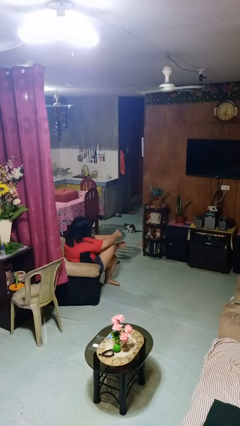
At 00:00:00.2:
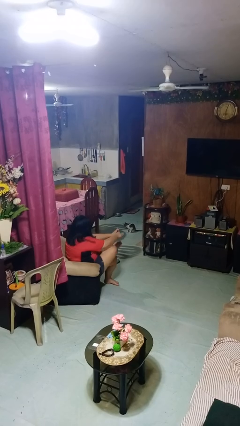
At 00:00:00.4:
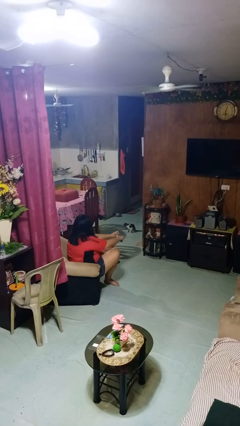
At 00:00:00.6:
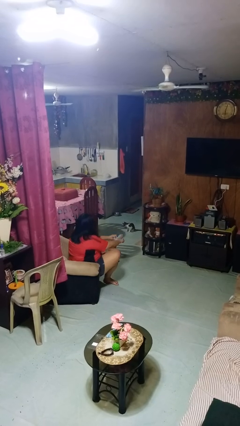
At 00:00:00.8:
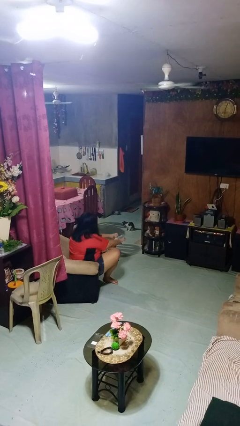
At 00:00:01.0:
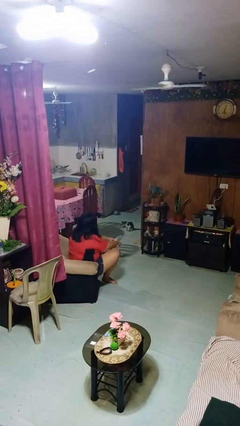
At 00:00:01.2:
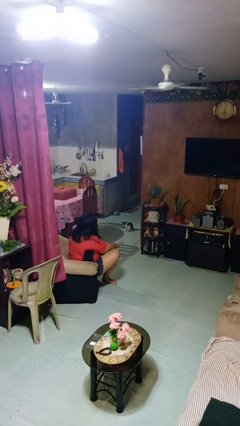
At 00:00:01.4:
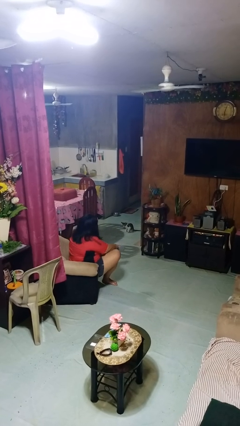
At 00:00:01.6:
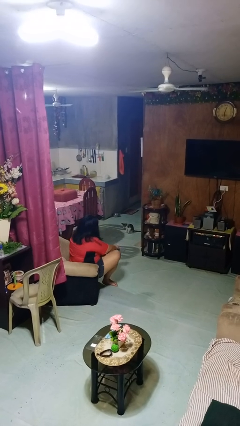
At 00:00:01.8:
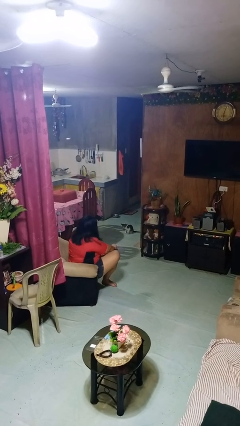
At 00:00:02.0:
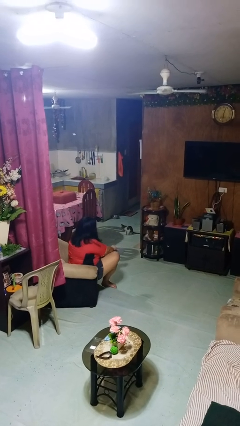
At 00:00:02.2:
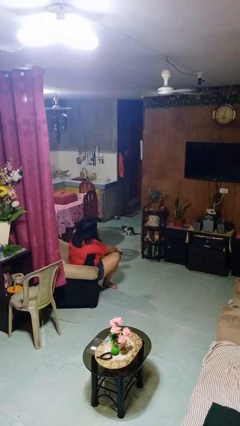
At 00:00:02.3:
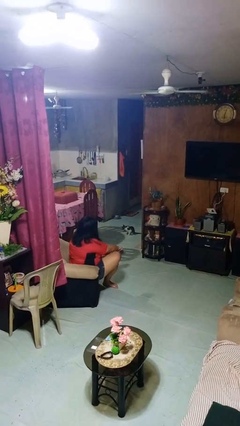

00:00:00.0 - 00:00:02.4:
person puts on socks

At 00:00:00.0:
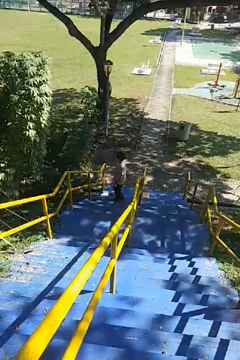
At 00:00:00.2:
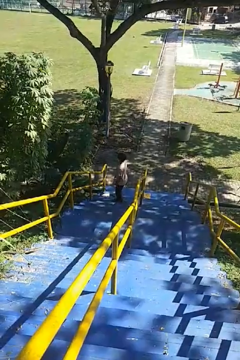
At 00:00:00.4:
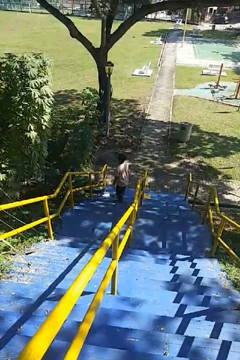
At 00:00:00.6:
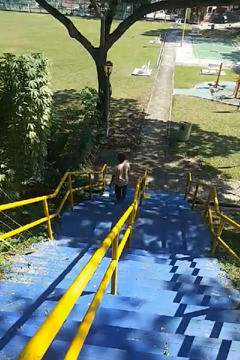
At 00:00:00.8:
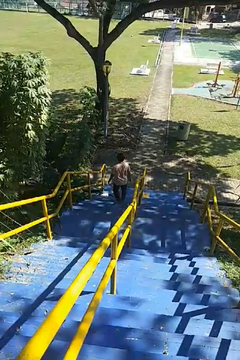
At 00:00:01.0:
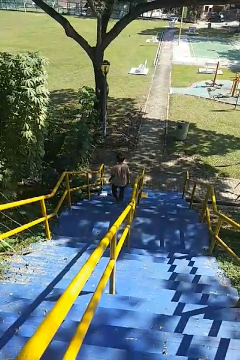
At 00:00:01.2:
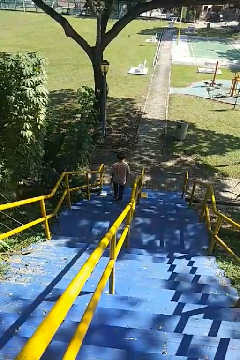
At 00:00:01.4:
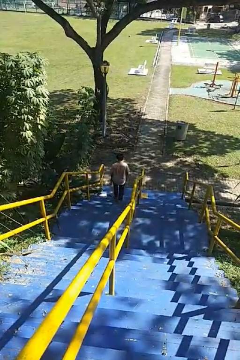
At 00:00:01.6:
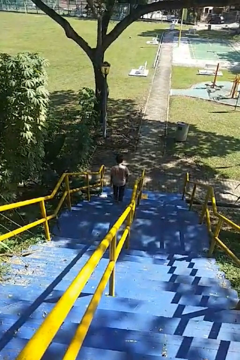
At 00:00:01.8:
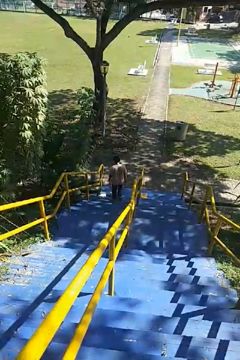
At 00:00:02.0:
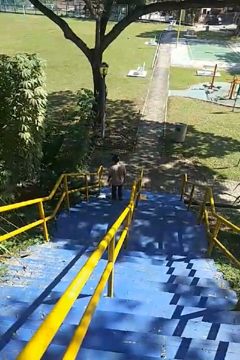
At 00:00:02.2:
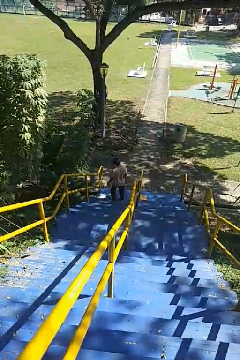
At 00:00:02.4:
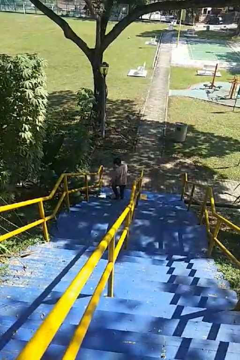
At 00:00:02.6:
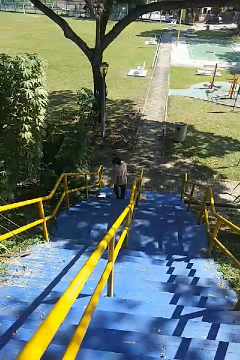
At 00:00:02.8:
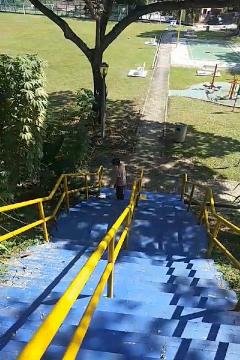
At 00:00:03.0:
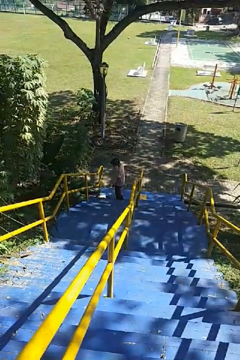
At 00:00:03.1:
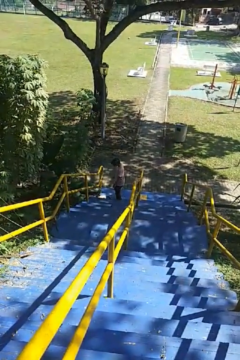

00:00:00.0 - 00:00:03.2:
person climbs down stairs

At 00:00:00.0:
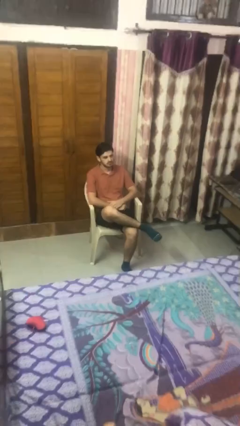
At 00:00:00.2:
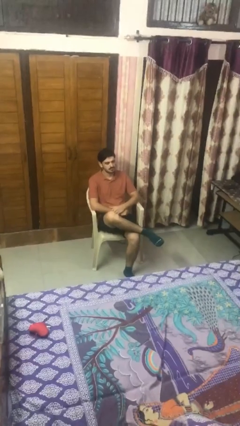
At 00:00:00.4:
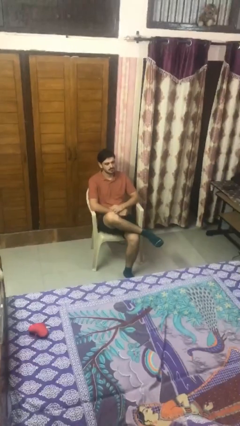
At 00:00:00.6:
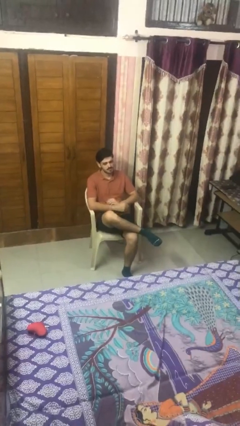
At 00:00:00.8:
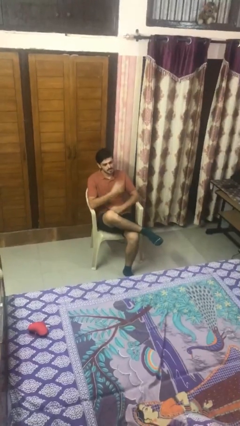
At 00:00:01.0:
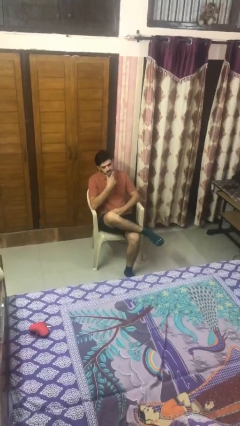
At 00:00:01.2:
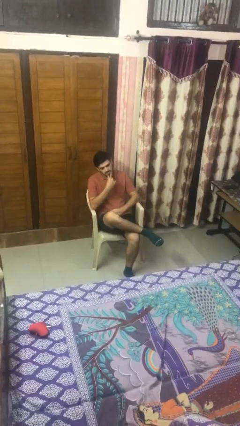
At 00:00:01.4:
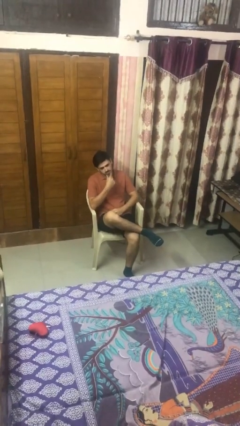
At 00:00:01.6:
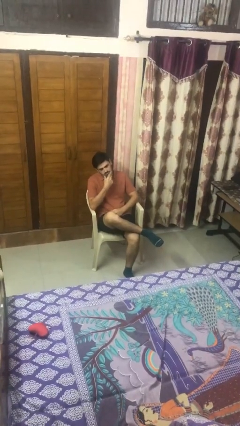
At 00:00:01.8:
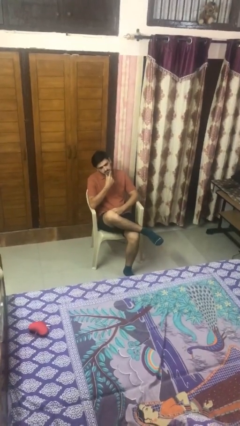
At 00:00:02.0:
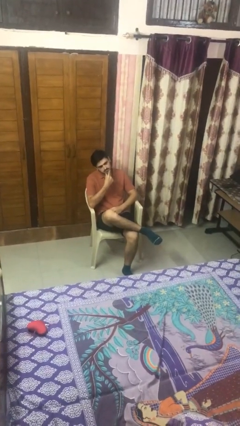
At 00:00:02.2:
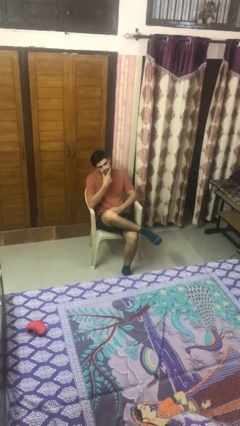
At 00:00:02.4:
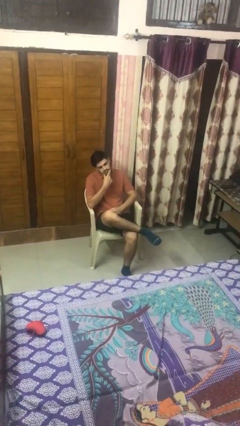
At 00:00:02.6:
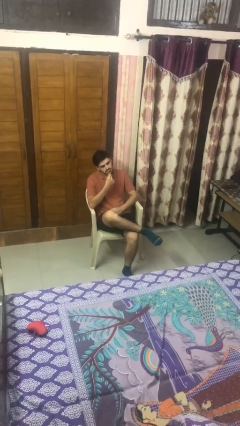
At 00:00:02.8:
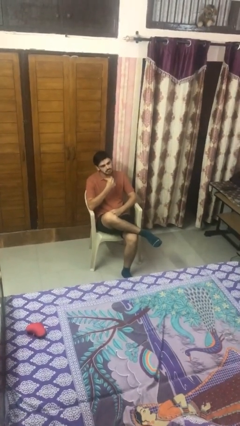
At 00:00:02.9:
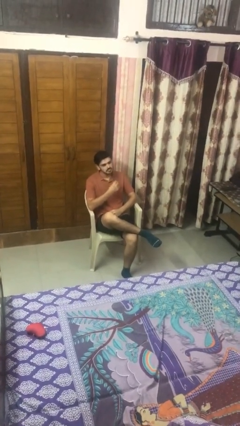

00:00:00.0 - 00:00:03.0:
person strokes chin

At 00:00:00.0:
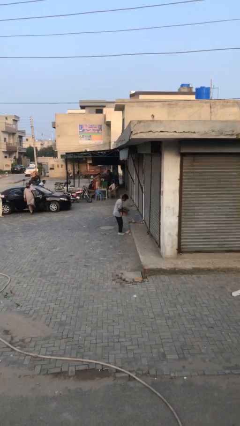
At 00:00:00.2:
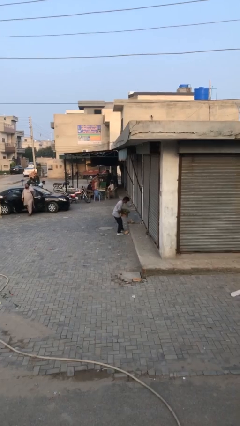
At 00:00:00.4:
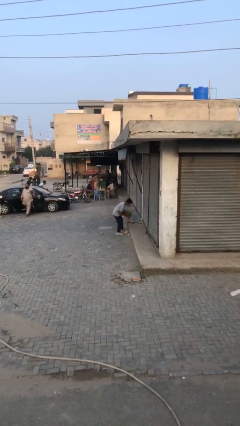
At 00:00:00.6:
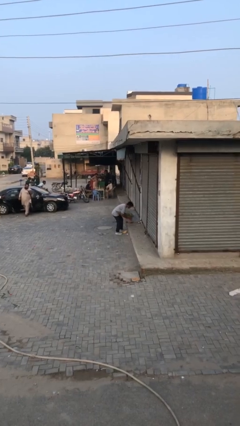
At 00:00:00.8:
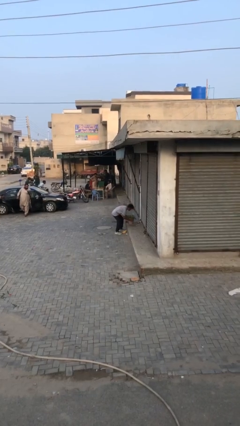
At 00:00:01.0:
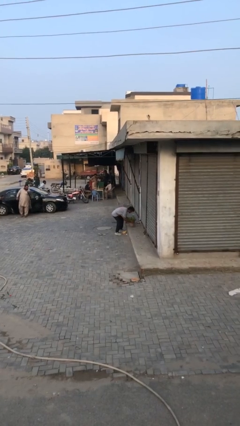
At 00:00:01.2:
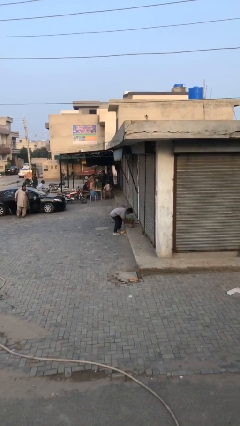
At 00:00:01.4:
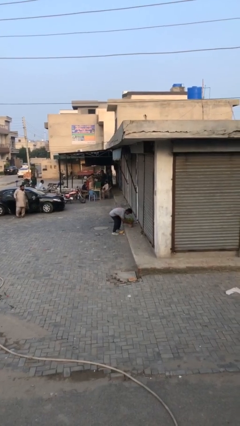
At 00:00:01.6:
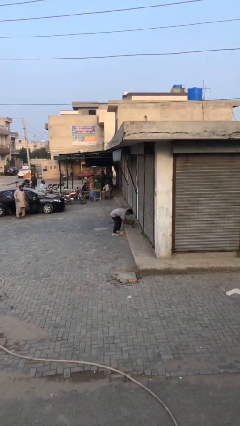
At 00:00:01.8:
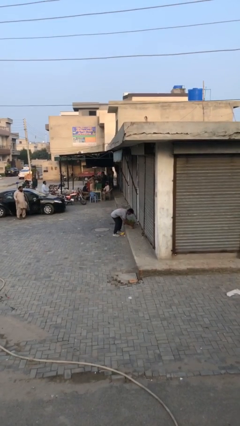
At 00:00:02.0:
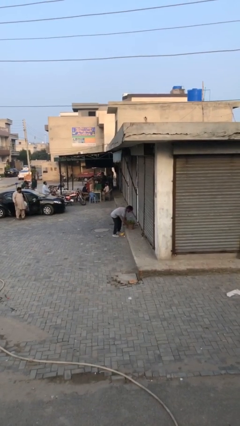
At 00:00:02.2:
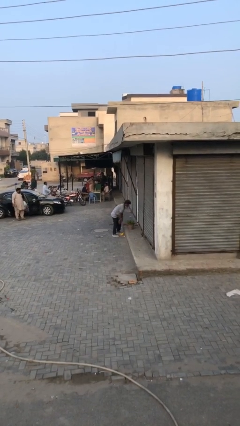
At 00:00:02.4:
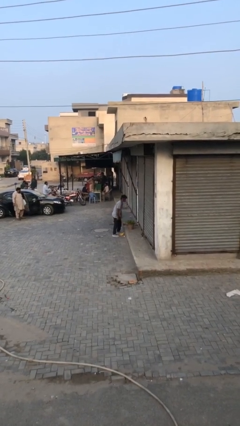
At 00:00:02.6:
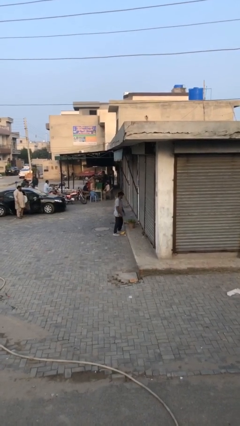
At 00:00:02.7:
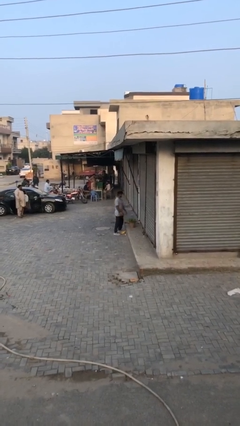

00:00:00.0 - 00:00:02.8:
person puts down object on floor

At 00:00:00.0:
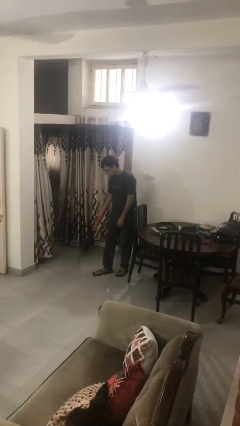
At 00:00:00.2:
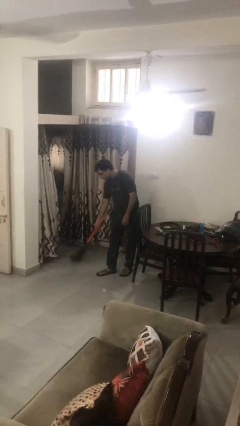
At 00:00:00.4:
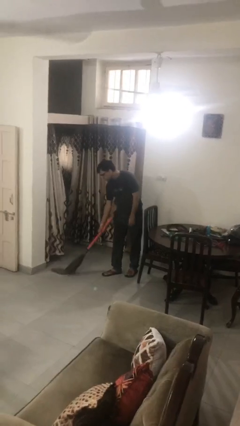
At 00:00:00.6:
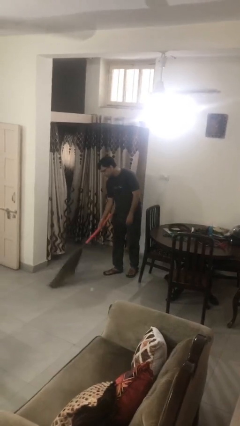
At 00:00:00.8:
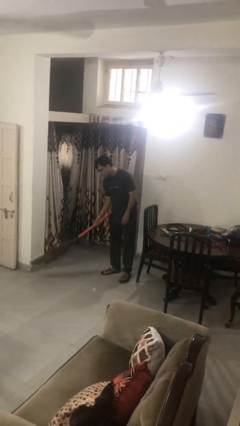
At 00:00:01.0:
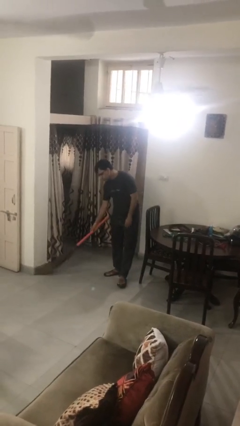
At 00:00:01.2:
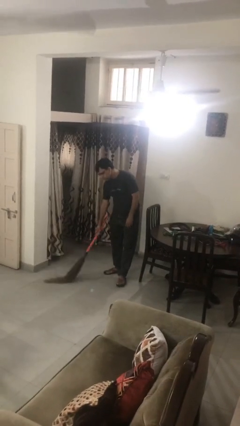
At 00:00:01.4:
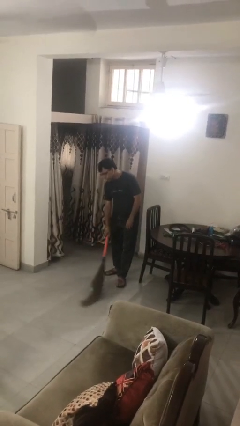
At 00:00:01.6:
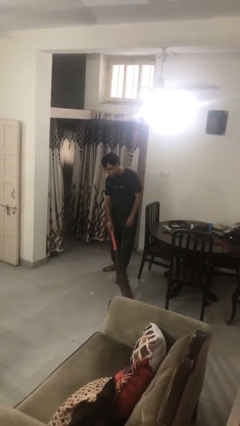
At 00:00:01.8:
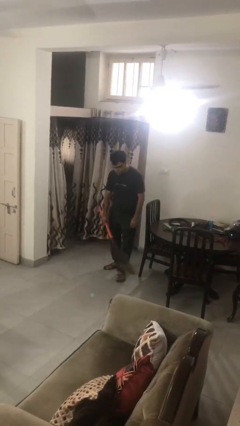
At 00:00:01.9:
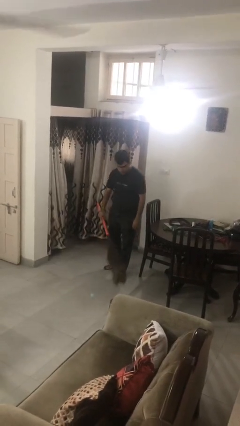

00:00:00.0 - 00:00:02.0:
person sweeps floor

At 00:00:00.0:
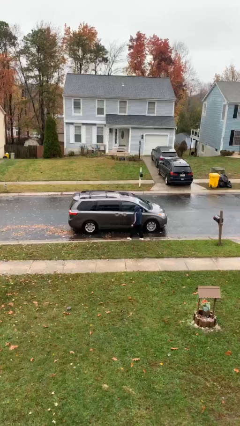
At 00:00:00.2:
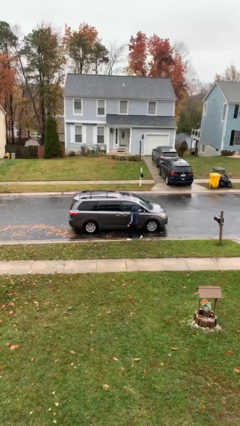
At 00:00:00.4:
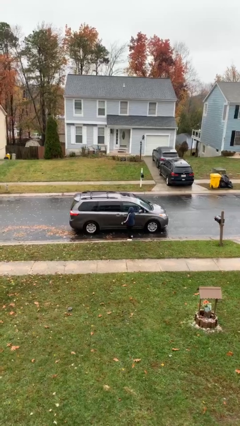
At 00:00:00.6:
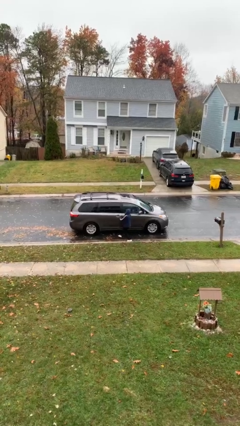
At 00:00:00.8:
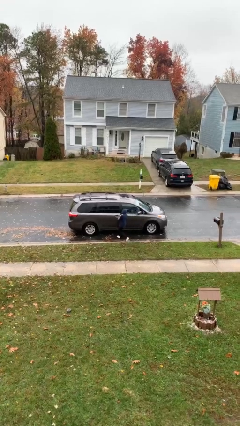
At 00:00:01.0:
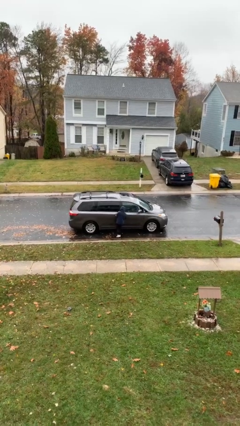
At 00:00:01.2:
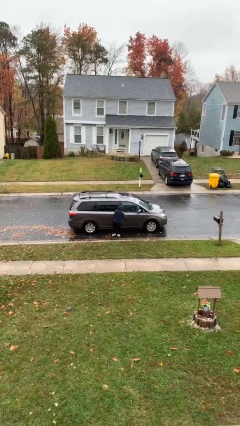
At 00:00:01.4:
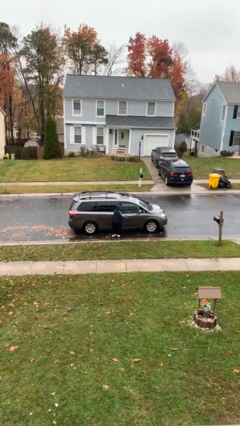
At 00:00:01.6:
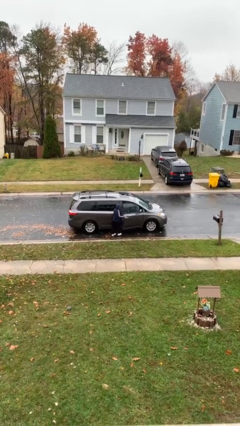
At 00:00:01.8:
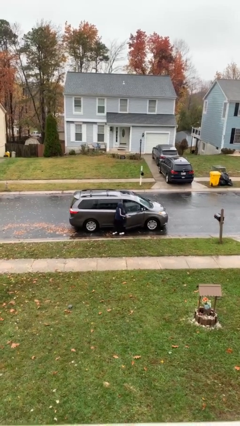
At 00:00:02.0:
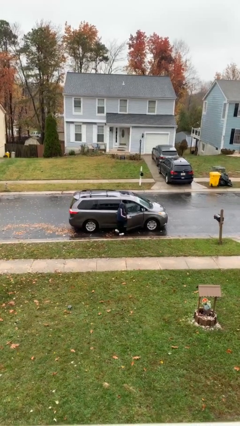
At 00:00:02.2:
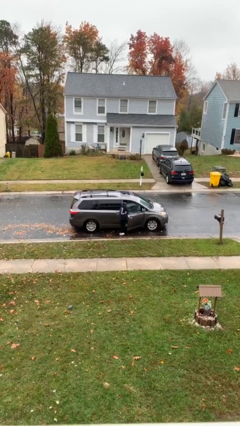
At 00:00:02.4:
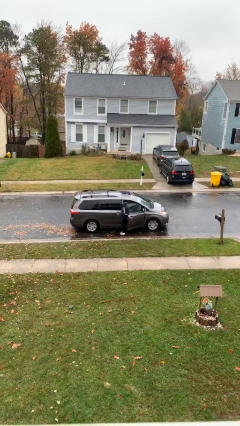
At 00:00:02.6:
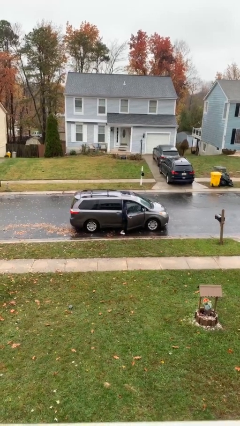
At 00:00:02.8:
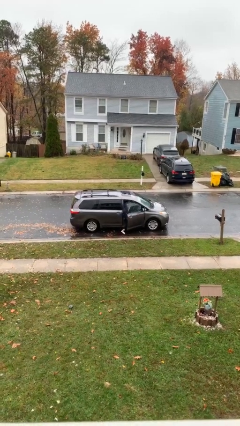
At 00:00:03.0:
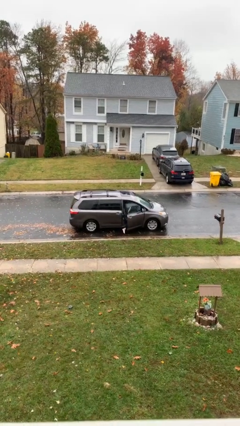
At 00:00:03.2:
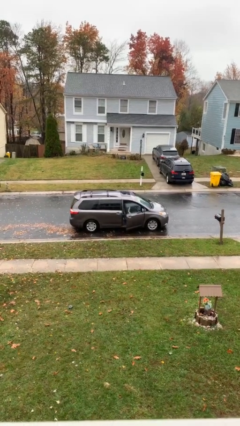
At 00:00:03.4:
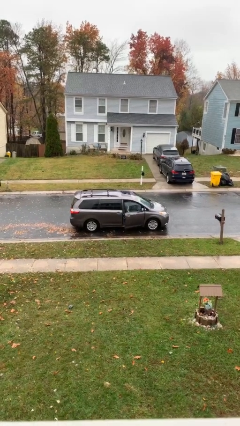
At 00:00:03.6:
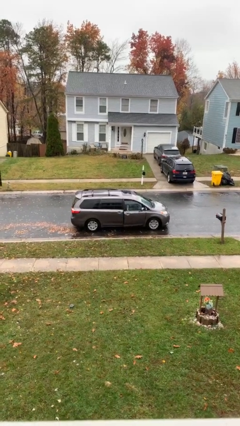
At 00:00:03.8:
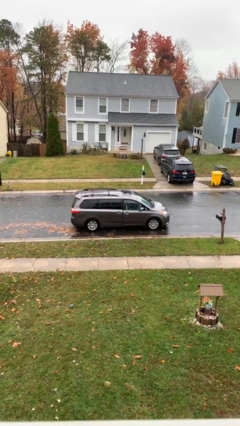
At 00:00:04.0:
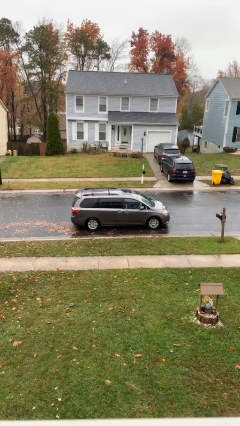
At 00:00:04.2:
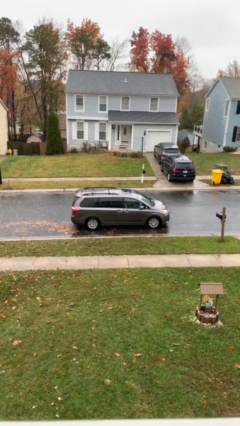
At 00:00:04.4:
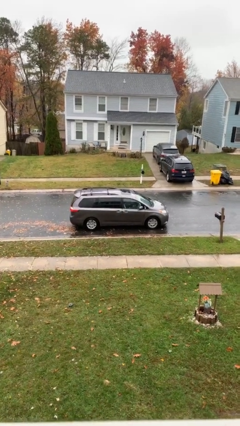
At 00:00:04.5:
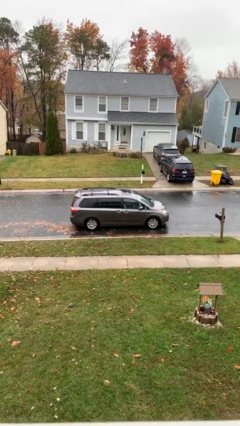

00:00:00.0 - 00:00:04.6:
car picks up person
